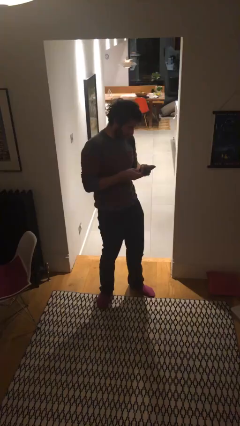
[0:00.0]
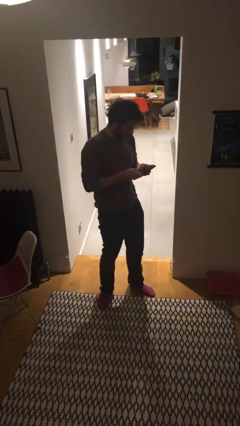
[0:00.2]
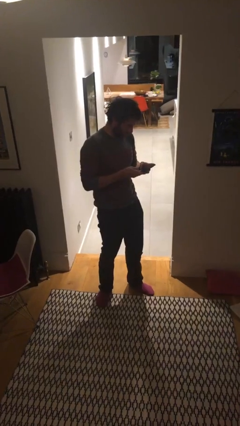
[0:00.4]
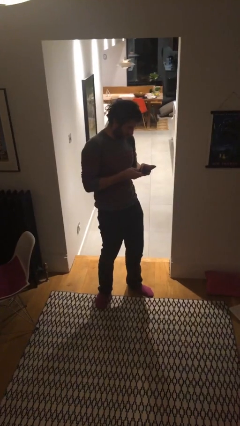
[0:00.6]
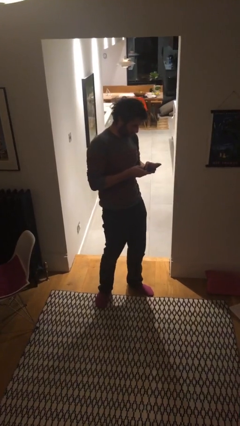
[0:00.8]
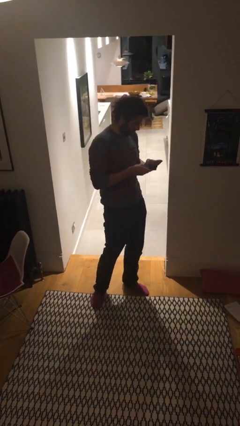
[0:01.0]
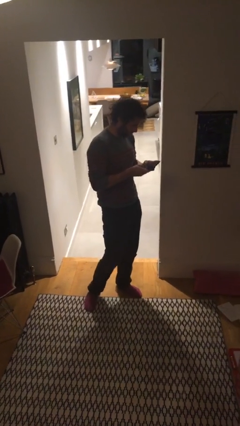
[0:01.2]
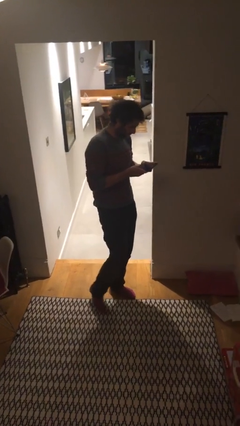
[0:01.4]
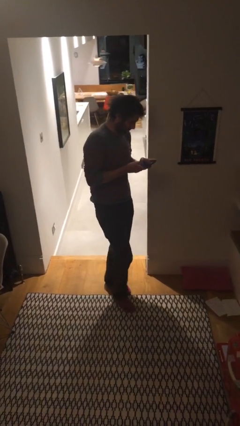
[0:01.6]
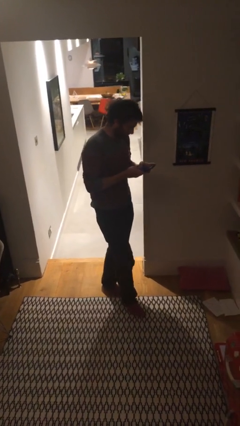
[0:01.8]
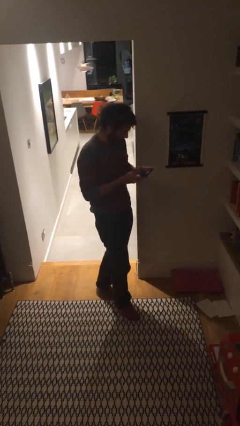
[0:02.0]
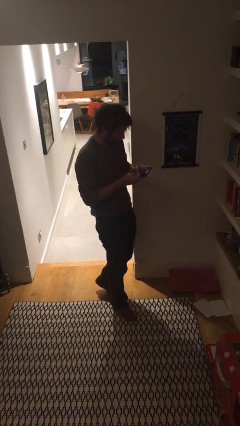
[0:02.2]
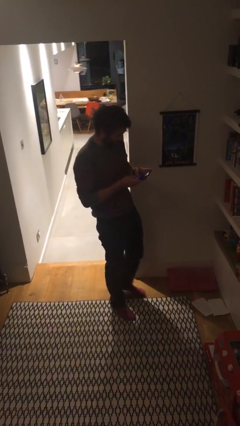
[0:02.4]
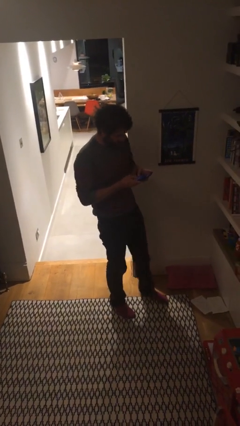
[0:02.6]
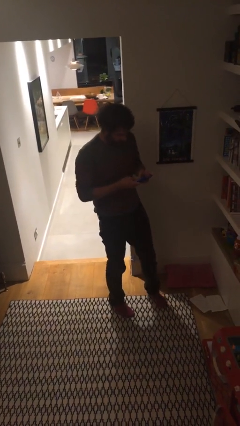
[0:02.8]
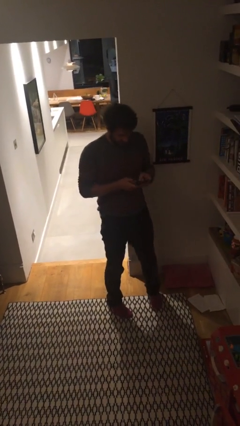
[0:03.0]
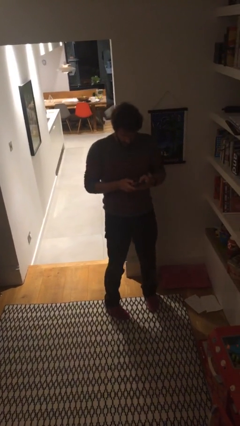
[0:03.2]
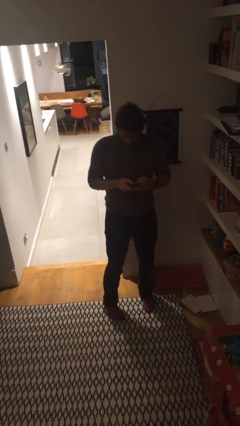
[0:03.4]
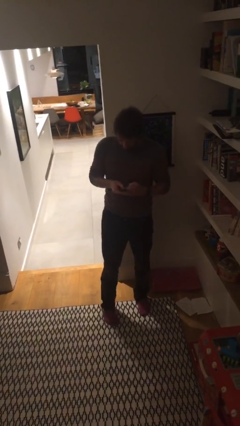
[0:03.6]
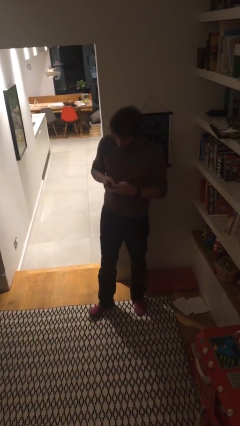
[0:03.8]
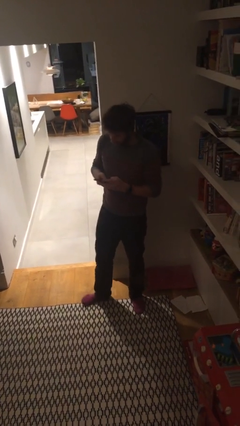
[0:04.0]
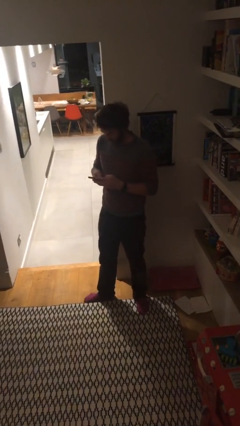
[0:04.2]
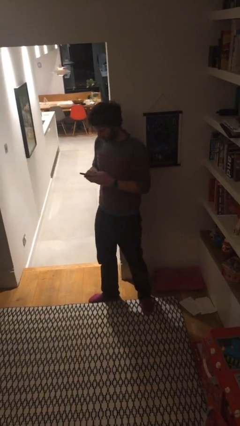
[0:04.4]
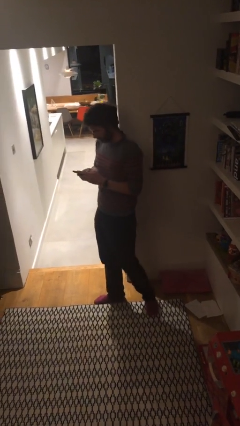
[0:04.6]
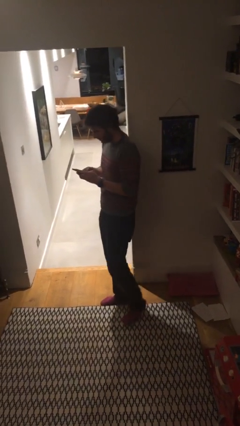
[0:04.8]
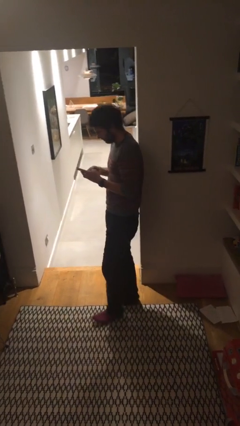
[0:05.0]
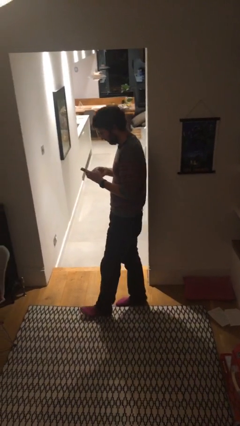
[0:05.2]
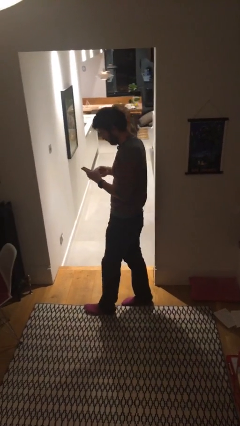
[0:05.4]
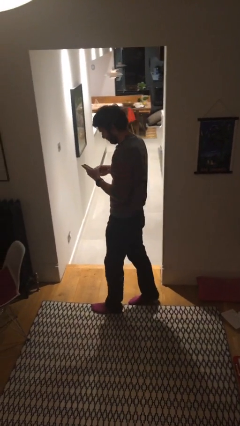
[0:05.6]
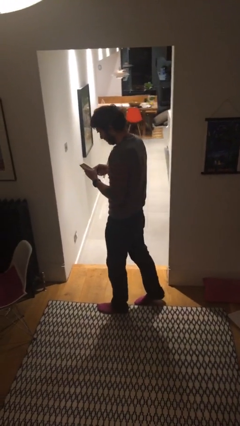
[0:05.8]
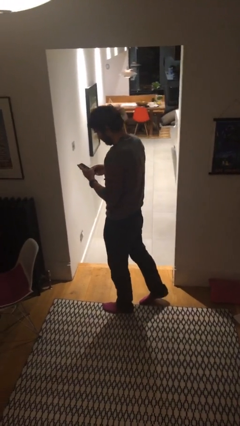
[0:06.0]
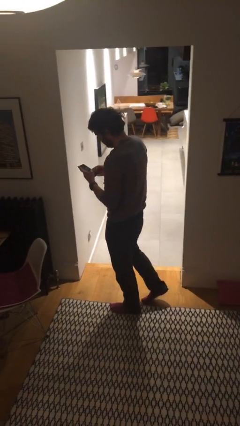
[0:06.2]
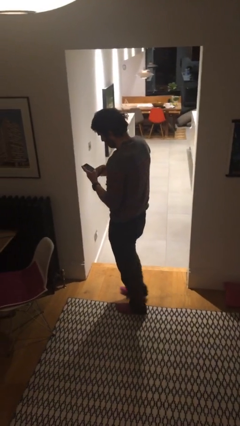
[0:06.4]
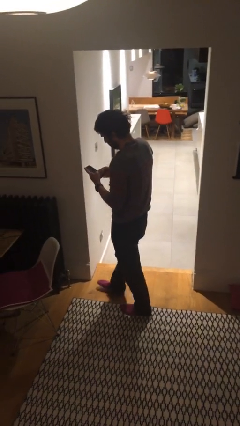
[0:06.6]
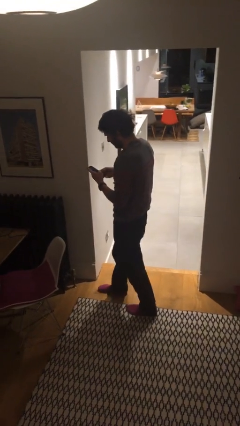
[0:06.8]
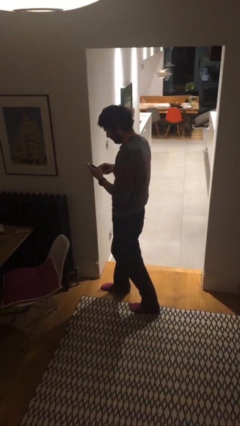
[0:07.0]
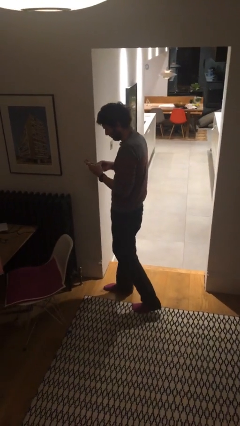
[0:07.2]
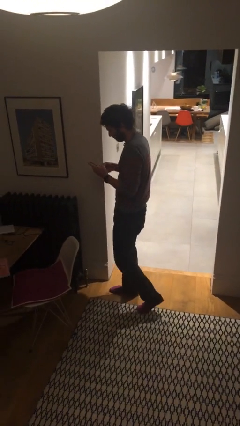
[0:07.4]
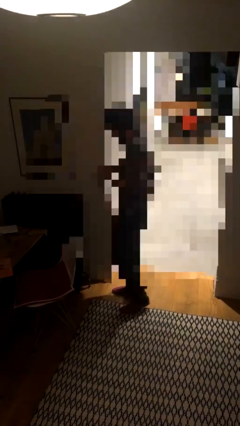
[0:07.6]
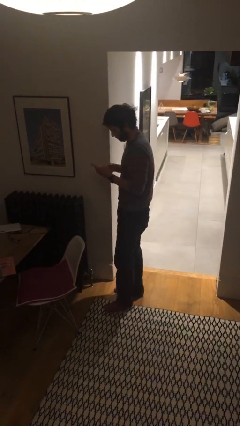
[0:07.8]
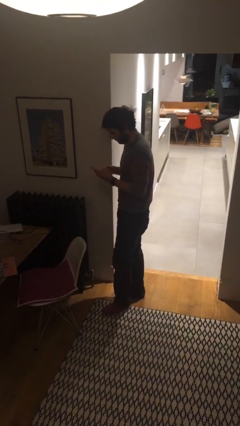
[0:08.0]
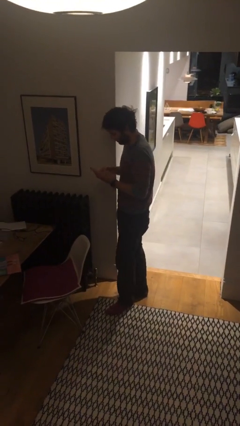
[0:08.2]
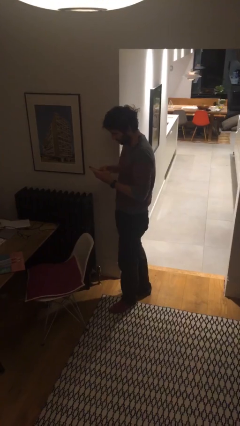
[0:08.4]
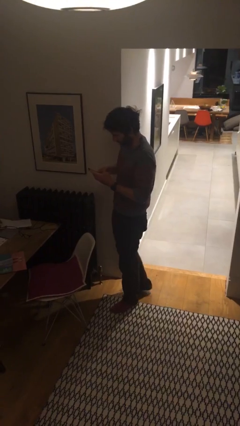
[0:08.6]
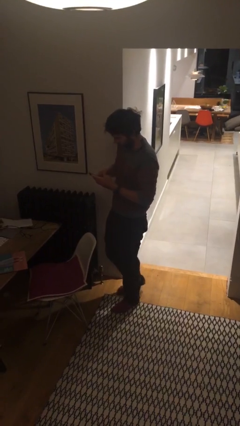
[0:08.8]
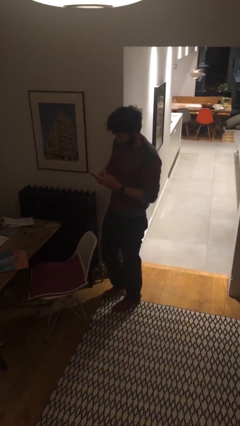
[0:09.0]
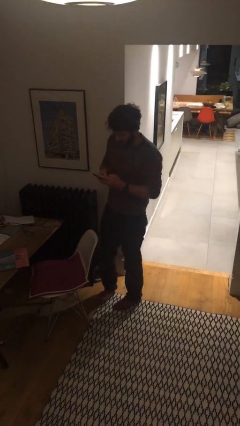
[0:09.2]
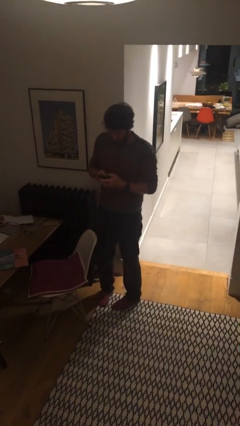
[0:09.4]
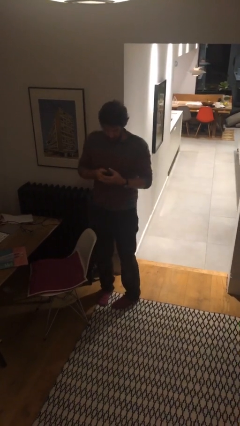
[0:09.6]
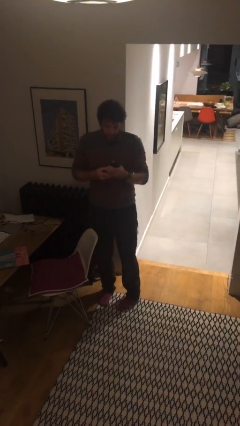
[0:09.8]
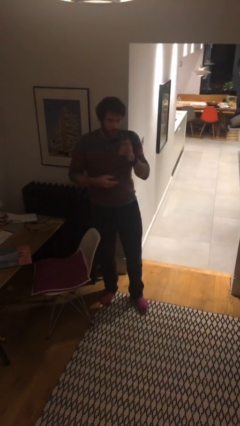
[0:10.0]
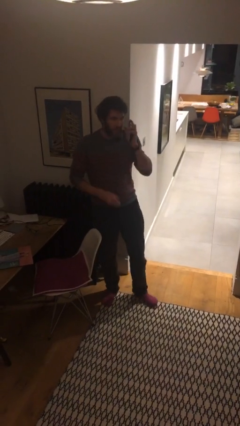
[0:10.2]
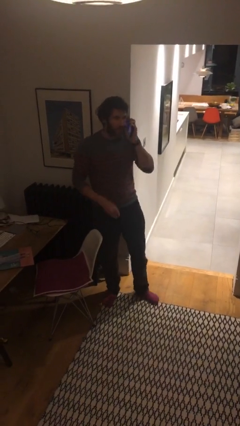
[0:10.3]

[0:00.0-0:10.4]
person texts on phone

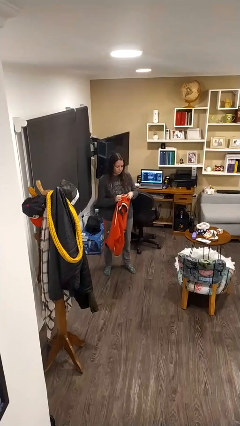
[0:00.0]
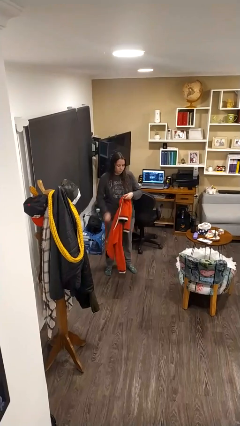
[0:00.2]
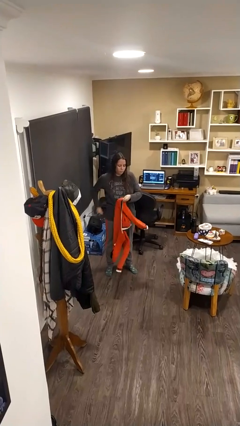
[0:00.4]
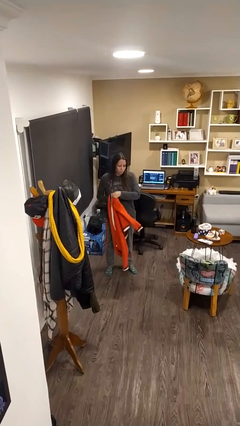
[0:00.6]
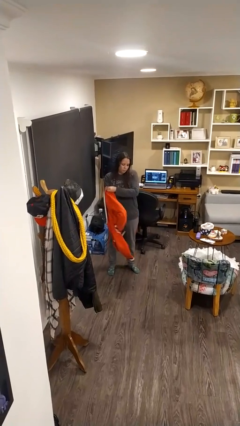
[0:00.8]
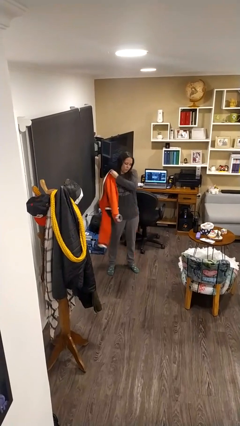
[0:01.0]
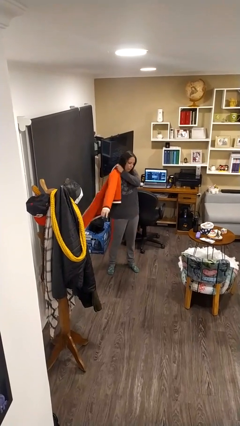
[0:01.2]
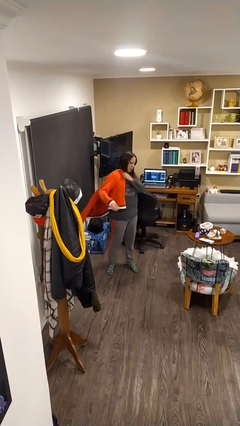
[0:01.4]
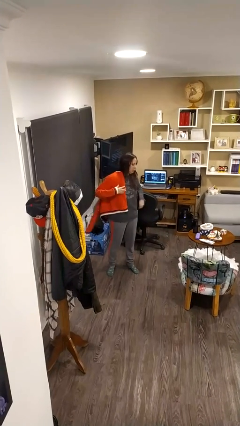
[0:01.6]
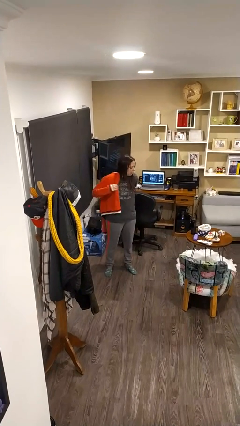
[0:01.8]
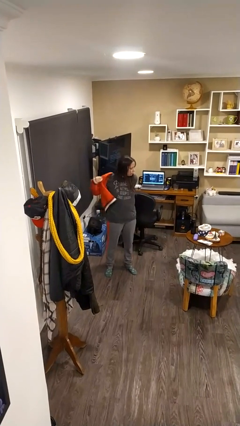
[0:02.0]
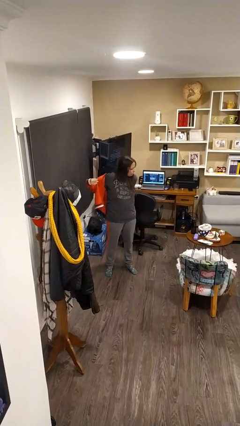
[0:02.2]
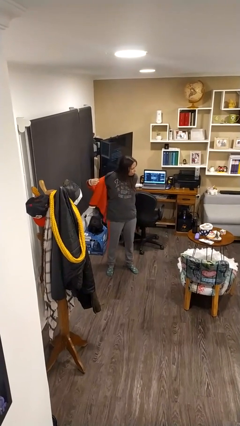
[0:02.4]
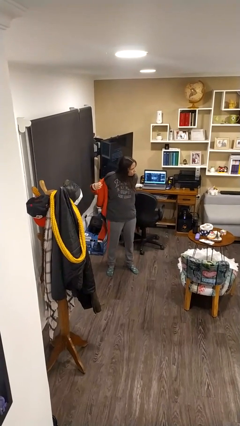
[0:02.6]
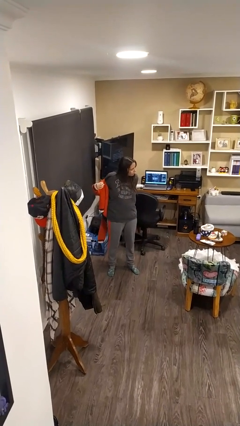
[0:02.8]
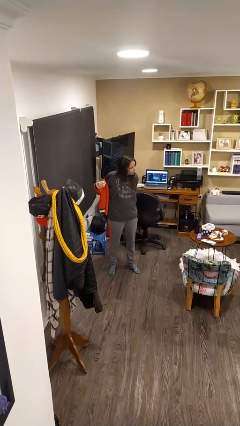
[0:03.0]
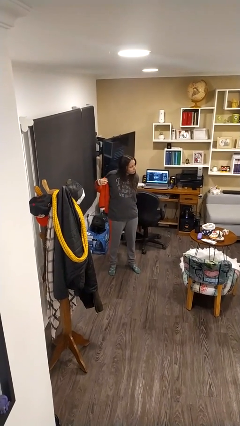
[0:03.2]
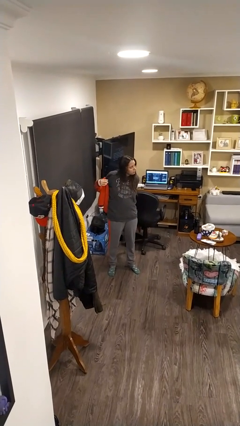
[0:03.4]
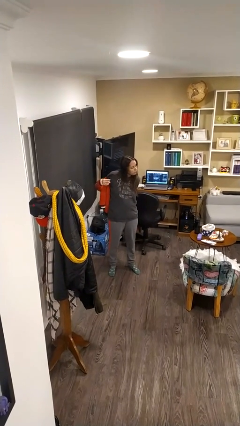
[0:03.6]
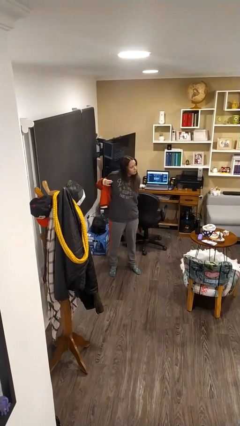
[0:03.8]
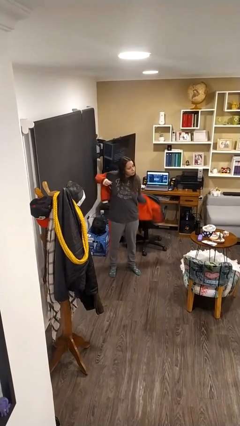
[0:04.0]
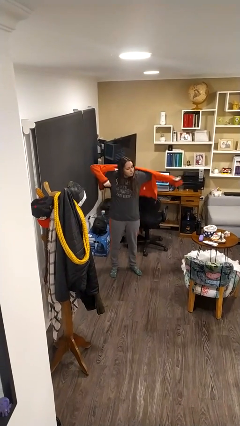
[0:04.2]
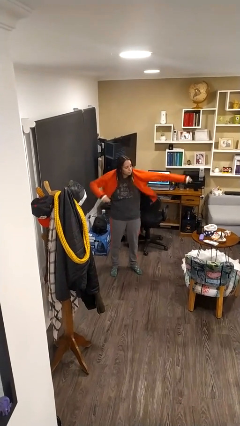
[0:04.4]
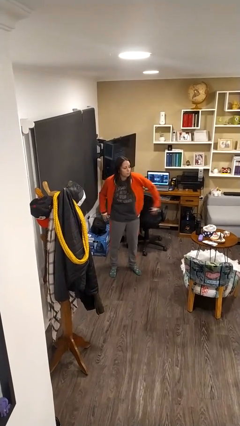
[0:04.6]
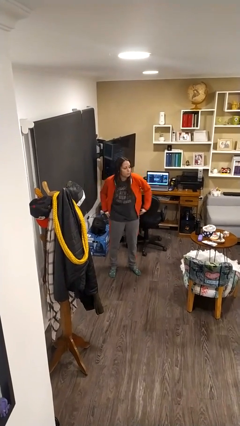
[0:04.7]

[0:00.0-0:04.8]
person puts on jacket

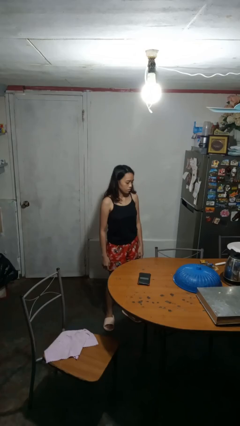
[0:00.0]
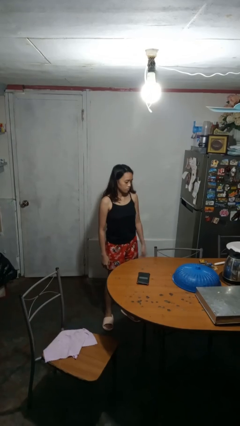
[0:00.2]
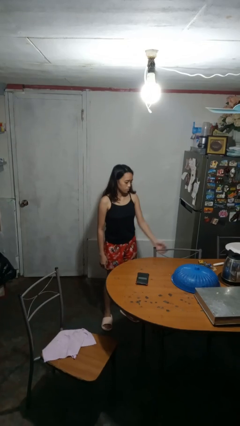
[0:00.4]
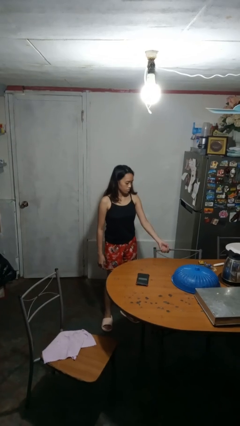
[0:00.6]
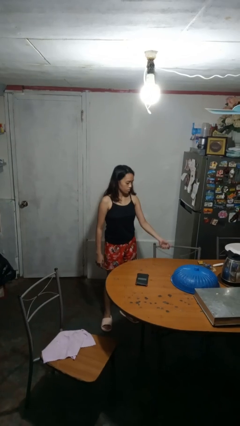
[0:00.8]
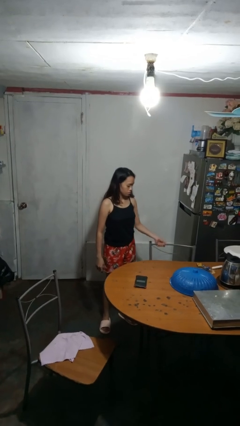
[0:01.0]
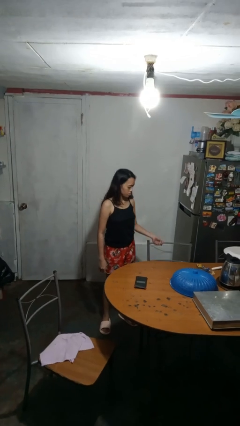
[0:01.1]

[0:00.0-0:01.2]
person pulls out chair

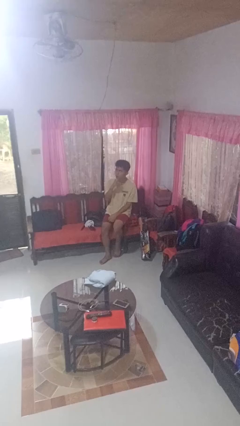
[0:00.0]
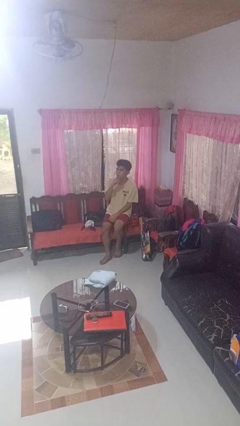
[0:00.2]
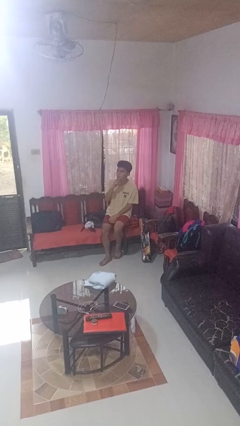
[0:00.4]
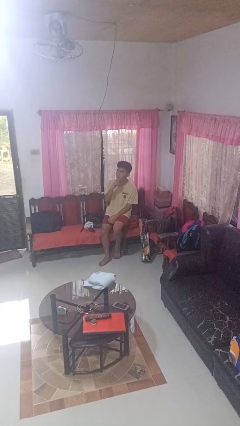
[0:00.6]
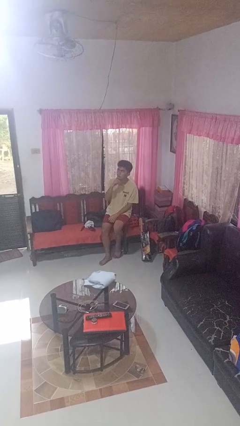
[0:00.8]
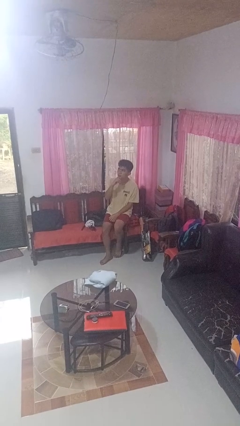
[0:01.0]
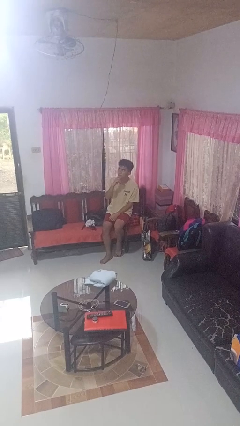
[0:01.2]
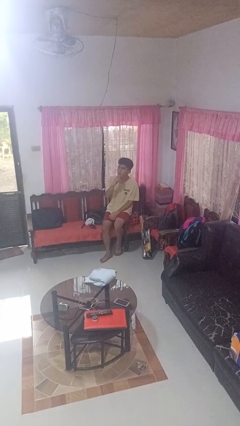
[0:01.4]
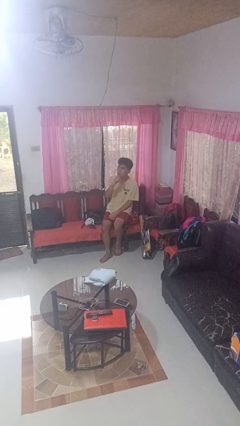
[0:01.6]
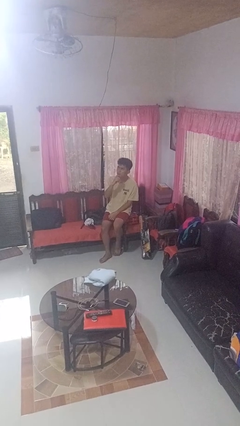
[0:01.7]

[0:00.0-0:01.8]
person strokes chin
